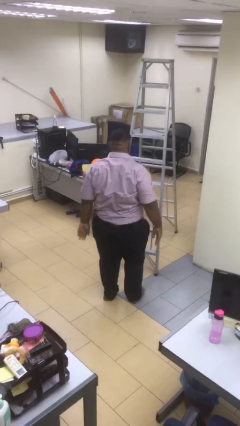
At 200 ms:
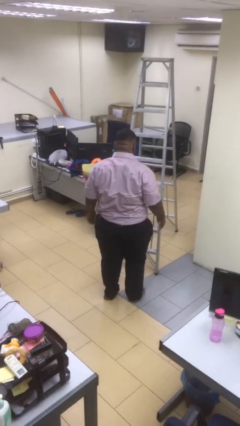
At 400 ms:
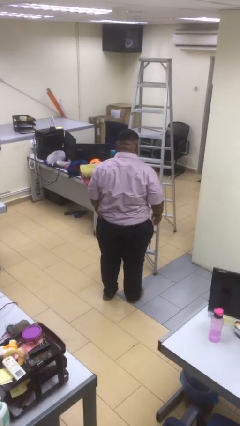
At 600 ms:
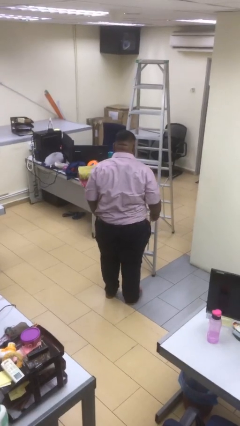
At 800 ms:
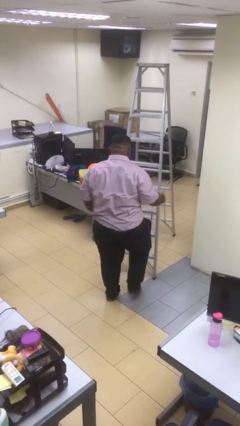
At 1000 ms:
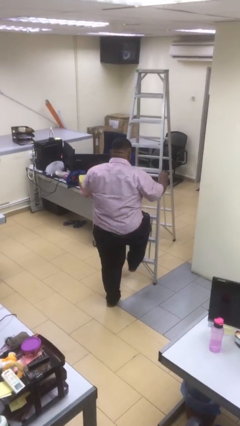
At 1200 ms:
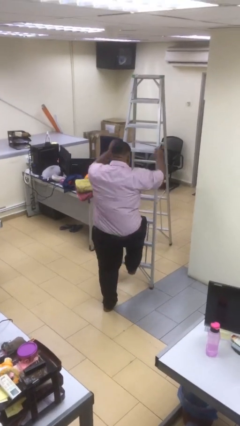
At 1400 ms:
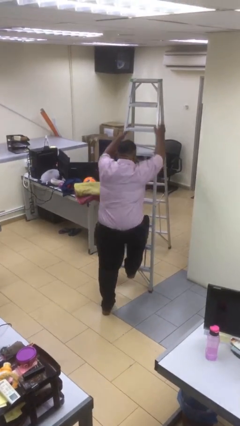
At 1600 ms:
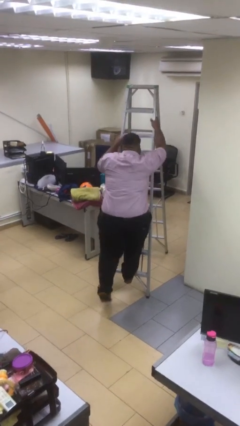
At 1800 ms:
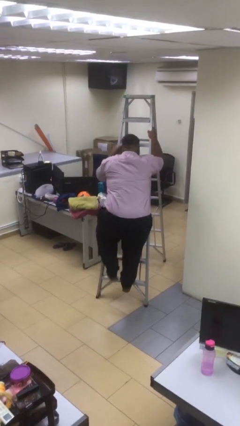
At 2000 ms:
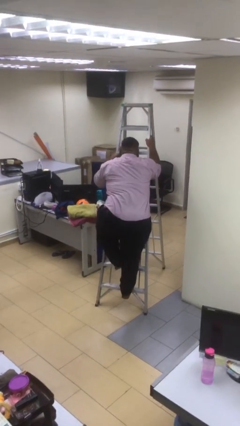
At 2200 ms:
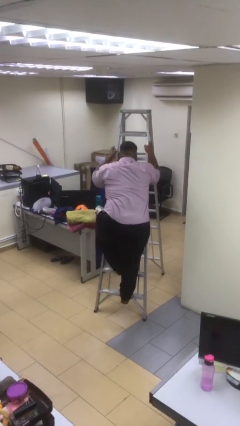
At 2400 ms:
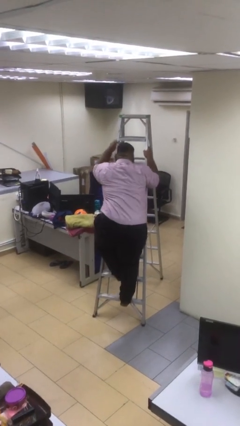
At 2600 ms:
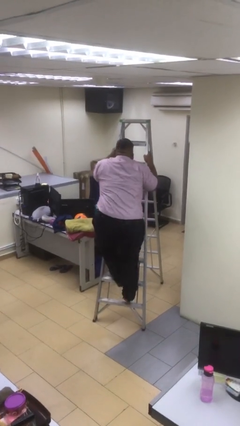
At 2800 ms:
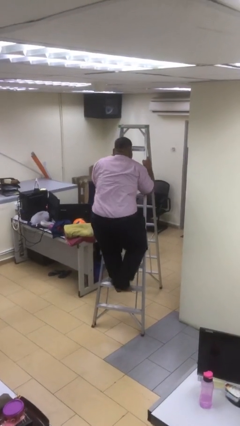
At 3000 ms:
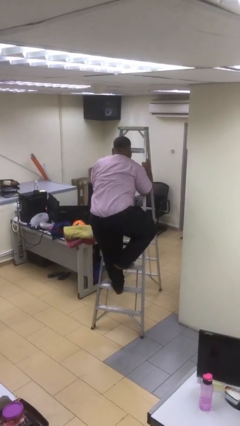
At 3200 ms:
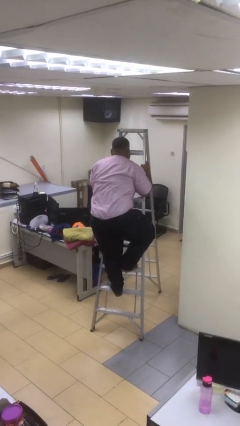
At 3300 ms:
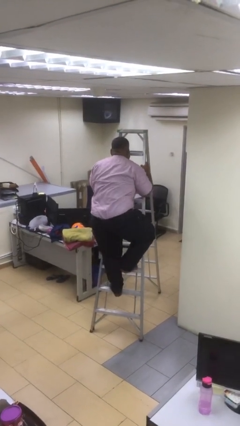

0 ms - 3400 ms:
person climbs up ladder

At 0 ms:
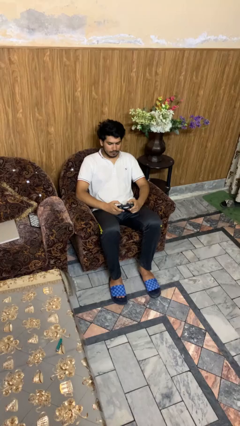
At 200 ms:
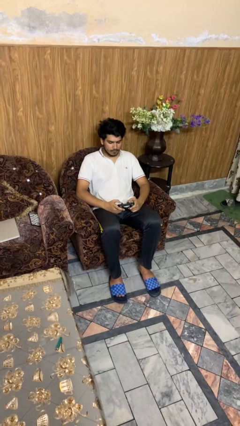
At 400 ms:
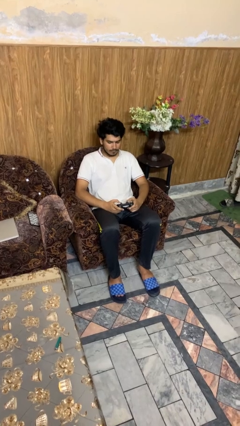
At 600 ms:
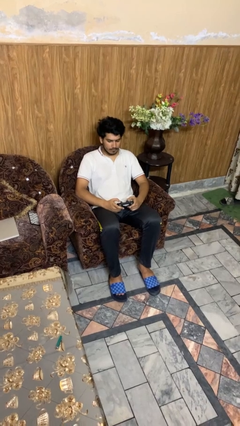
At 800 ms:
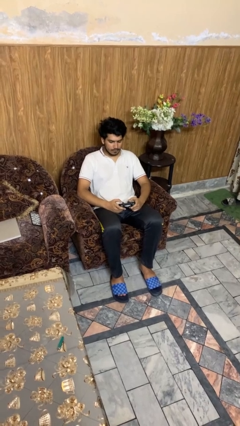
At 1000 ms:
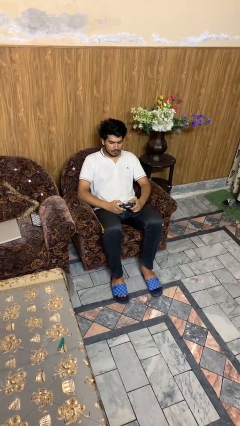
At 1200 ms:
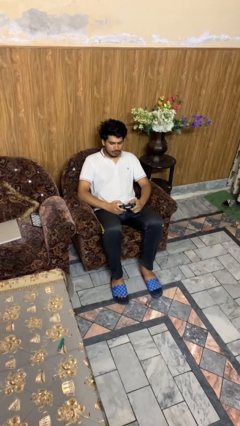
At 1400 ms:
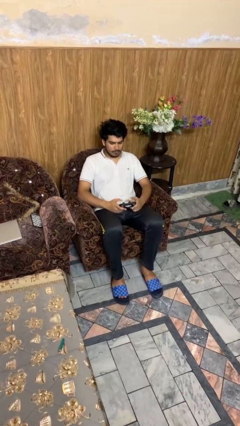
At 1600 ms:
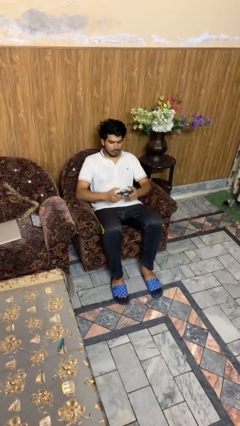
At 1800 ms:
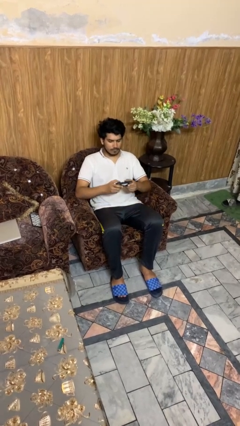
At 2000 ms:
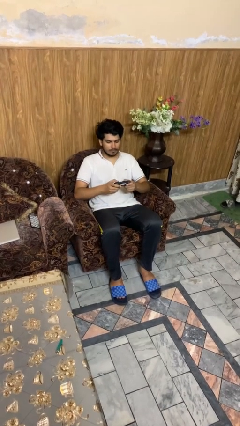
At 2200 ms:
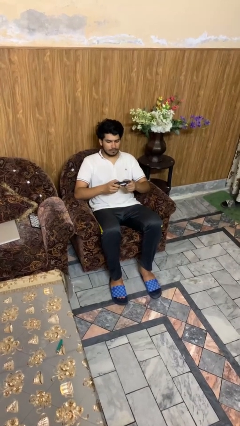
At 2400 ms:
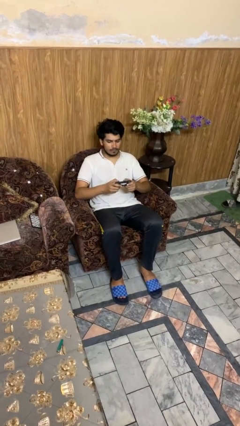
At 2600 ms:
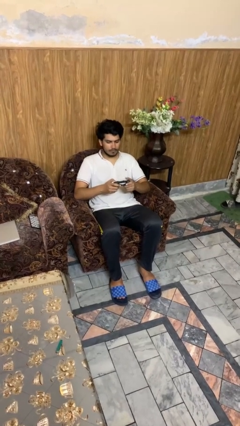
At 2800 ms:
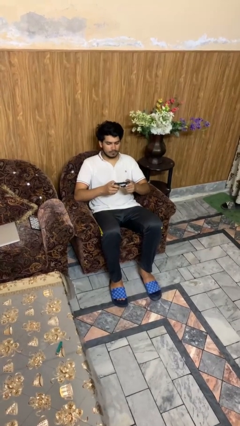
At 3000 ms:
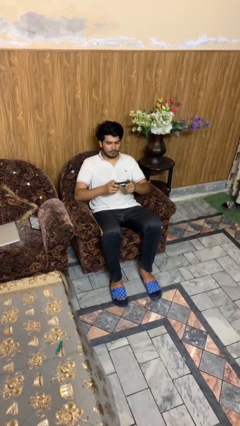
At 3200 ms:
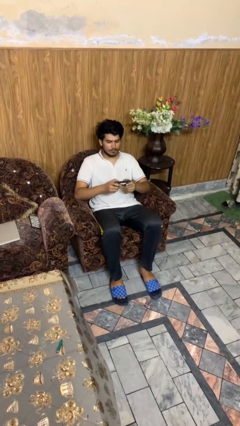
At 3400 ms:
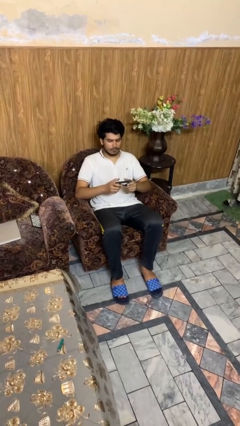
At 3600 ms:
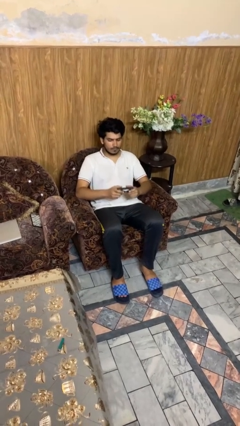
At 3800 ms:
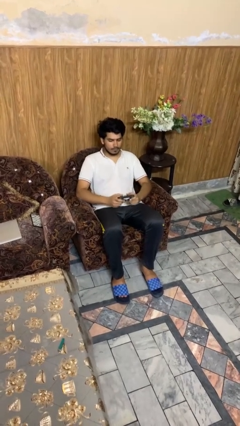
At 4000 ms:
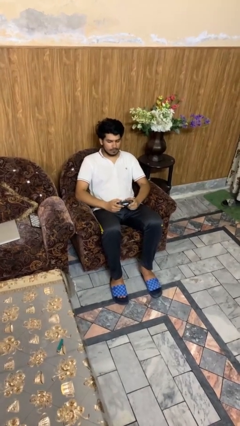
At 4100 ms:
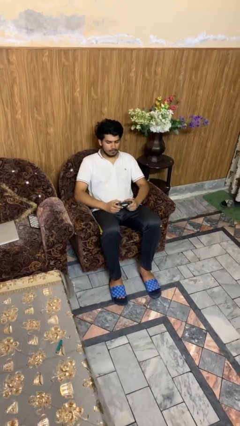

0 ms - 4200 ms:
person interacts with handheld game

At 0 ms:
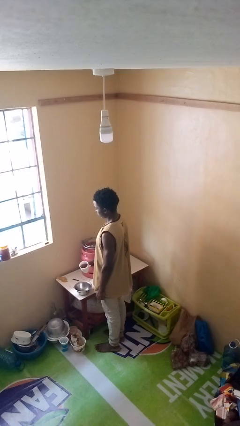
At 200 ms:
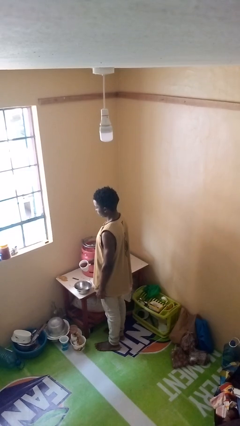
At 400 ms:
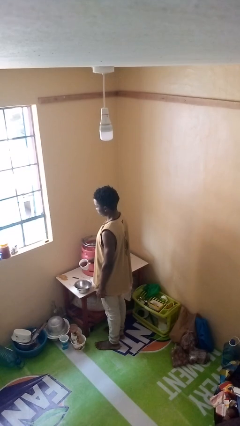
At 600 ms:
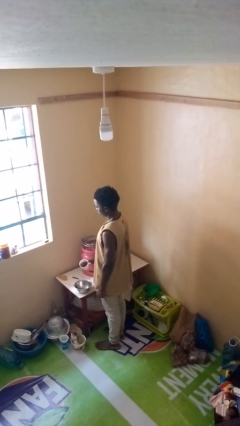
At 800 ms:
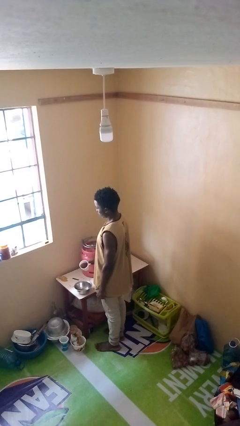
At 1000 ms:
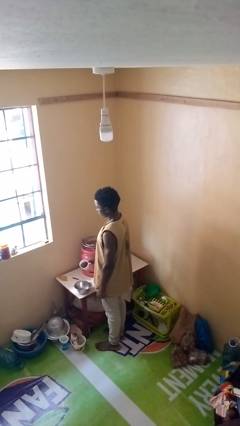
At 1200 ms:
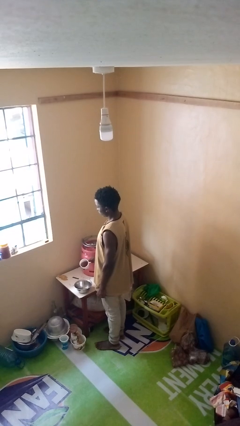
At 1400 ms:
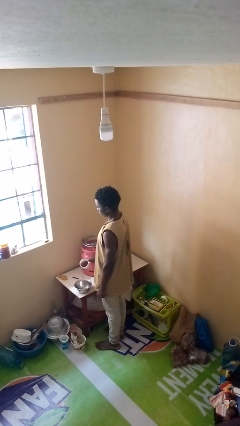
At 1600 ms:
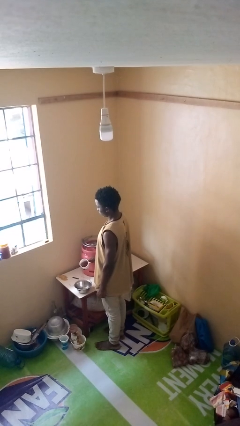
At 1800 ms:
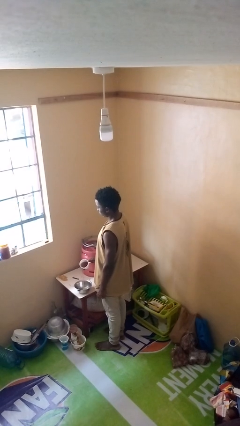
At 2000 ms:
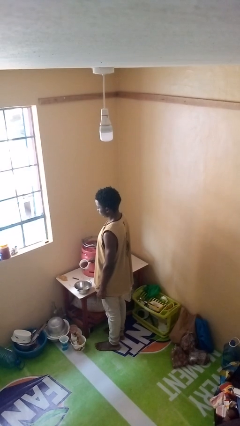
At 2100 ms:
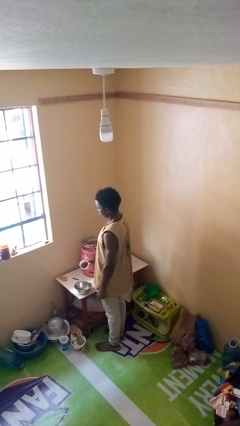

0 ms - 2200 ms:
person pours into bowl

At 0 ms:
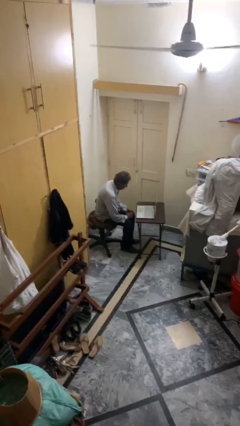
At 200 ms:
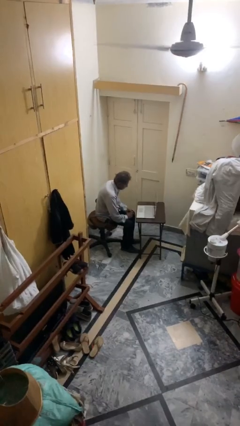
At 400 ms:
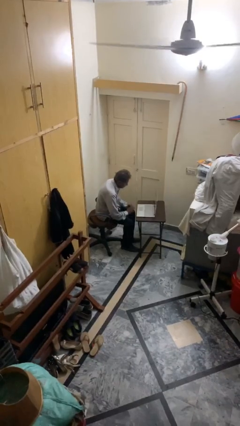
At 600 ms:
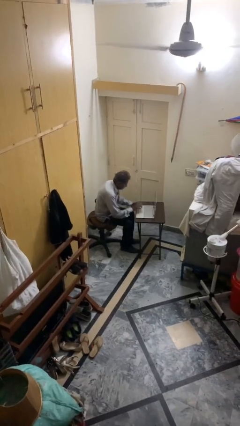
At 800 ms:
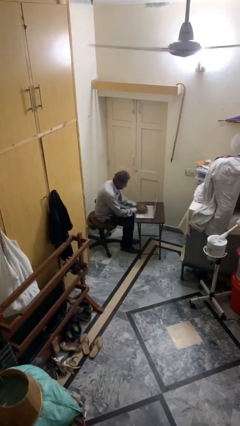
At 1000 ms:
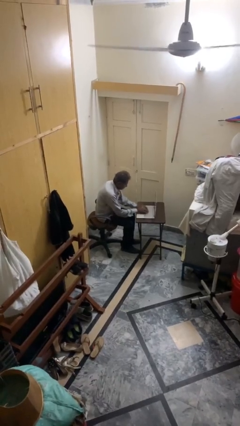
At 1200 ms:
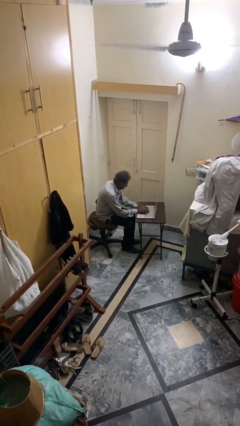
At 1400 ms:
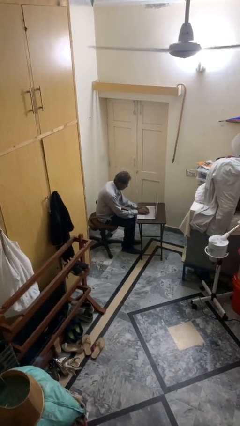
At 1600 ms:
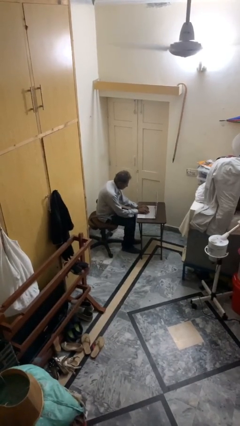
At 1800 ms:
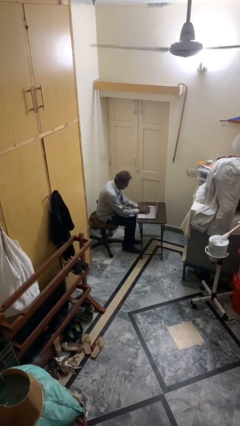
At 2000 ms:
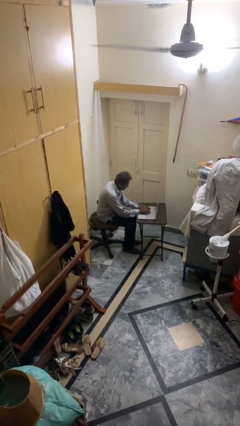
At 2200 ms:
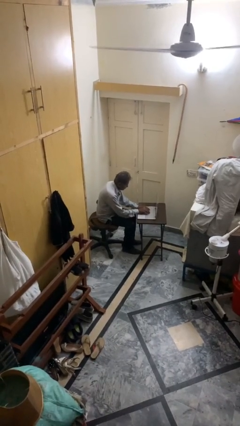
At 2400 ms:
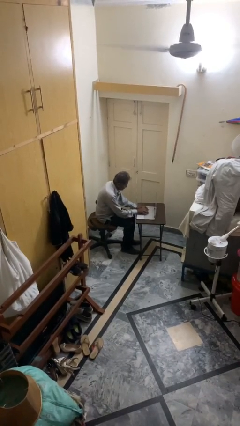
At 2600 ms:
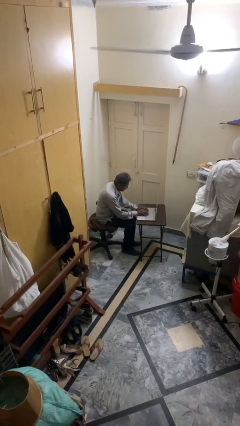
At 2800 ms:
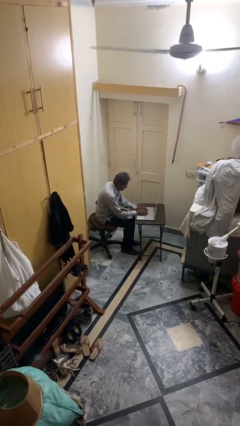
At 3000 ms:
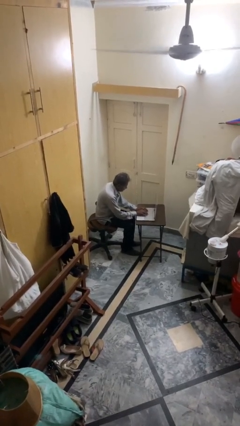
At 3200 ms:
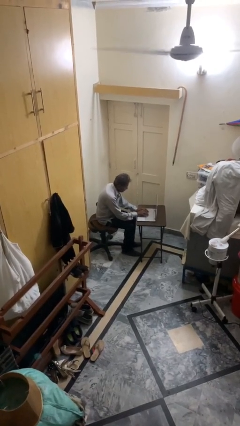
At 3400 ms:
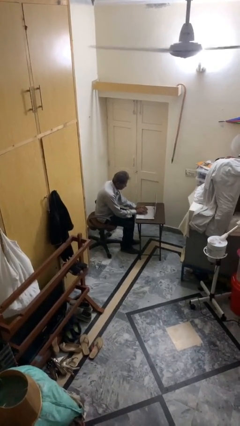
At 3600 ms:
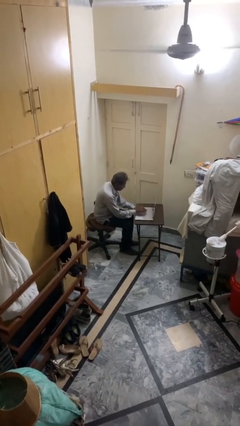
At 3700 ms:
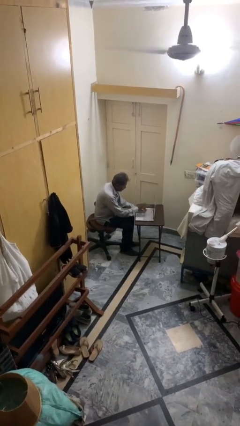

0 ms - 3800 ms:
person interacts with laptop

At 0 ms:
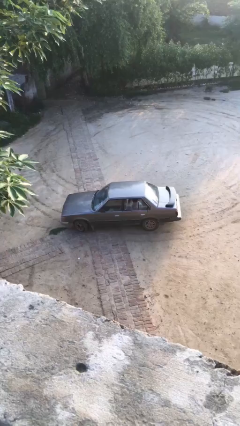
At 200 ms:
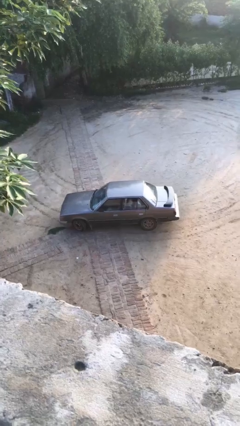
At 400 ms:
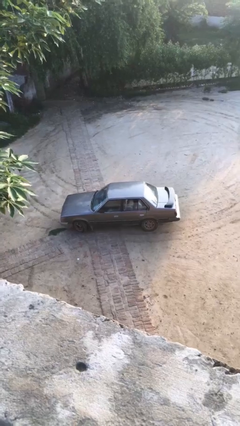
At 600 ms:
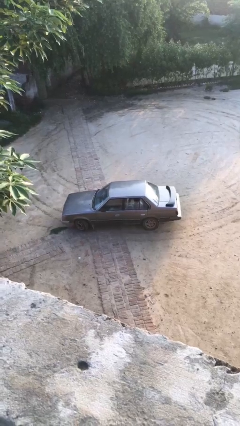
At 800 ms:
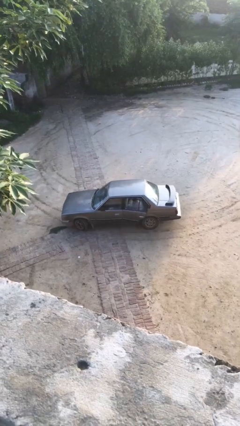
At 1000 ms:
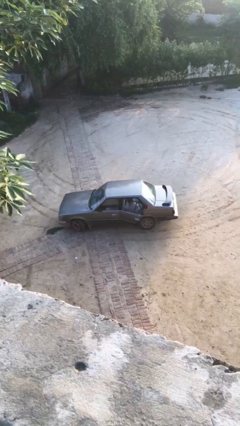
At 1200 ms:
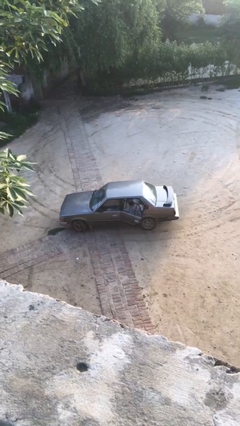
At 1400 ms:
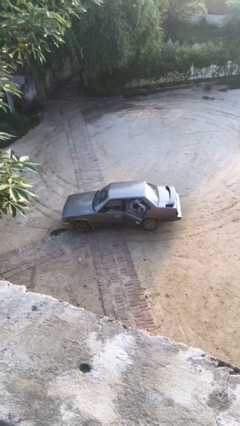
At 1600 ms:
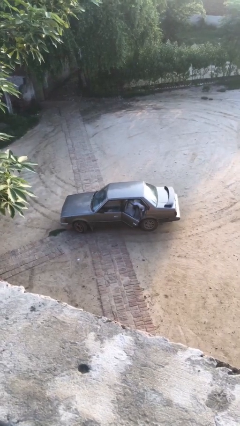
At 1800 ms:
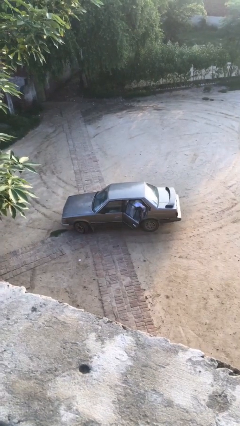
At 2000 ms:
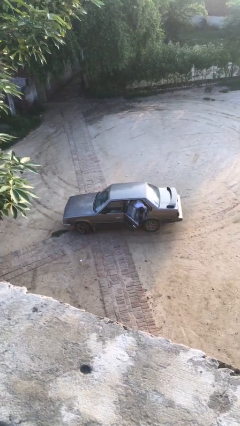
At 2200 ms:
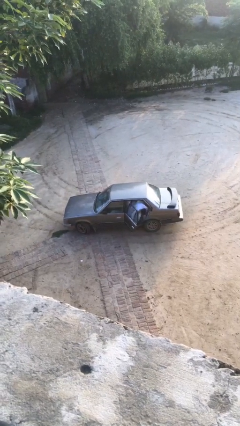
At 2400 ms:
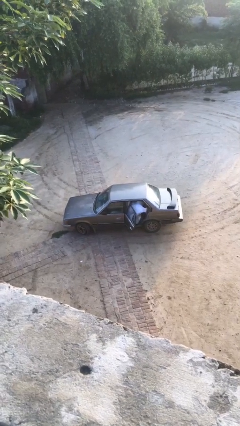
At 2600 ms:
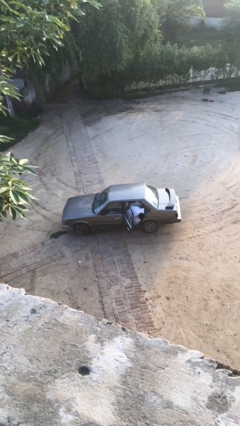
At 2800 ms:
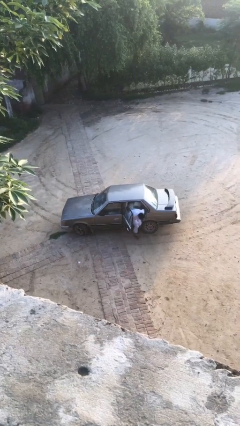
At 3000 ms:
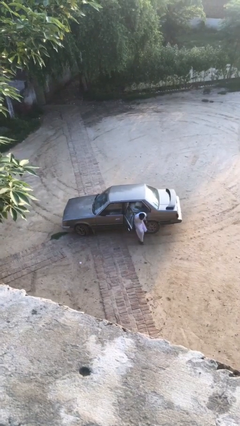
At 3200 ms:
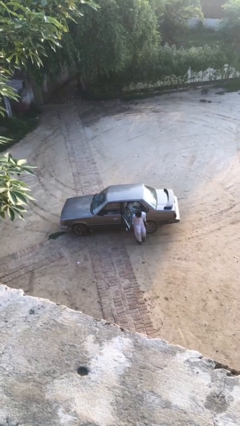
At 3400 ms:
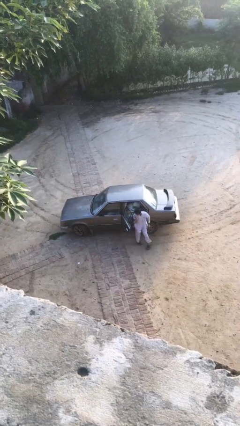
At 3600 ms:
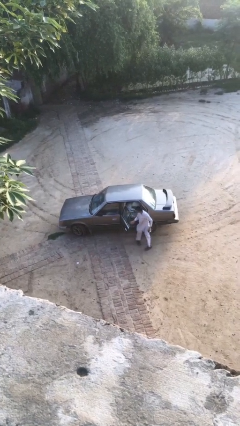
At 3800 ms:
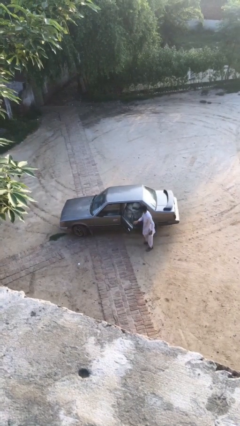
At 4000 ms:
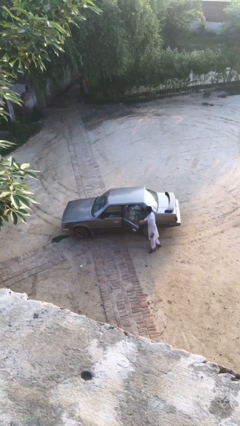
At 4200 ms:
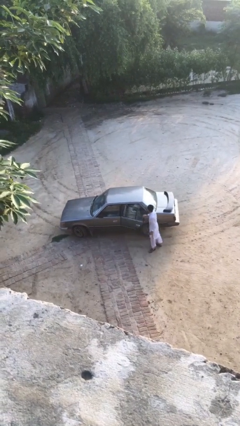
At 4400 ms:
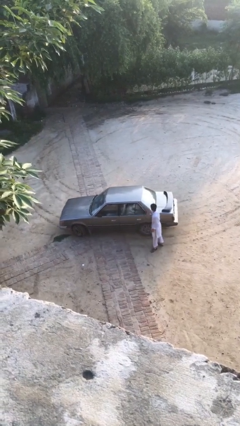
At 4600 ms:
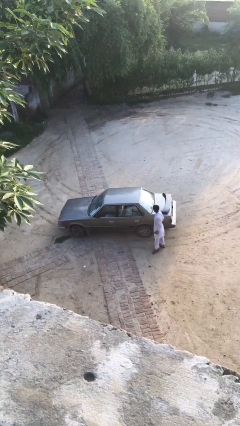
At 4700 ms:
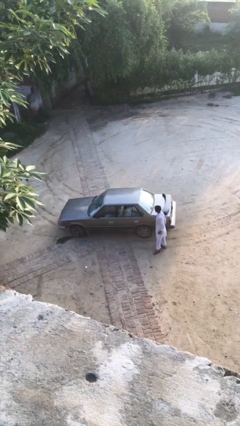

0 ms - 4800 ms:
car drops off person
